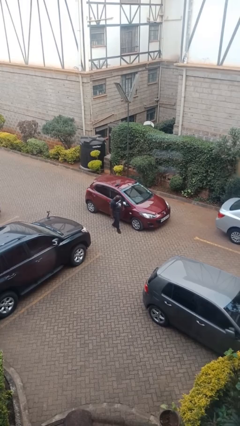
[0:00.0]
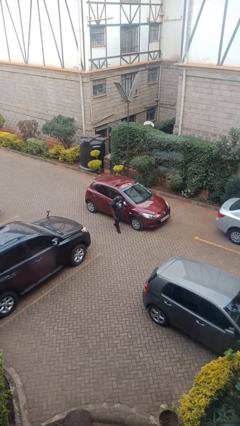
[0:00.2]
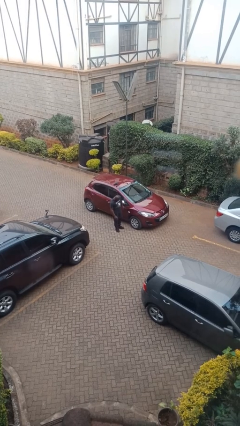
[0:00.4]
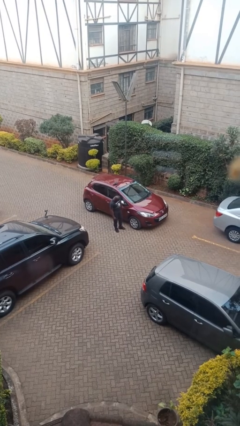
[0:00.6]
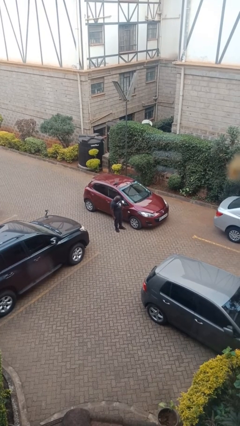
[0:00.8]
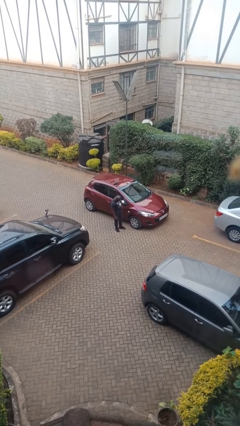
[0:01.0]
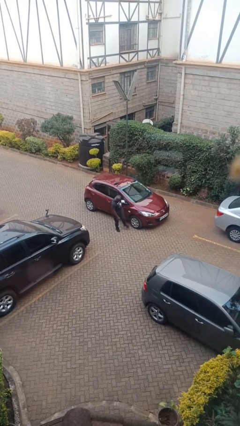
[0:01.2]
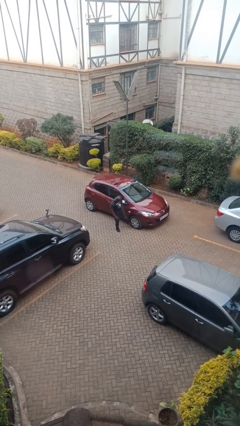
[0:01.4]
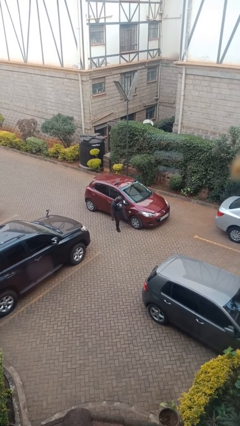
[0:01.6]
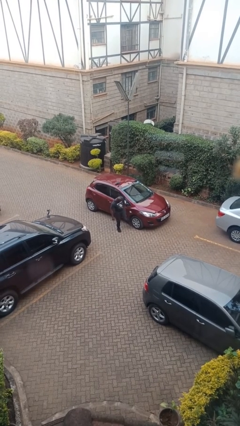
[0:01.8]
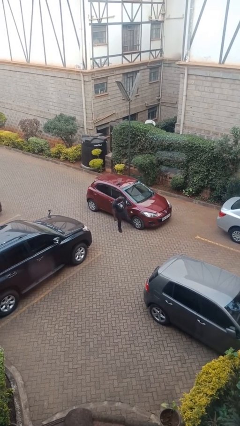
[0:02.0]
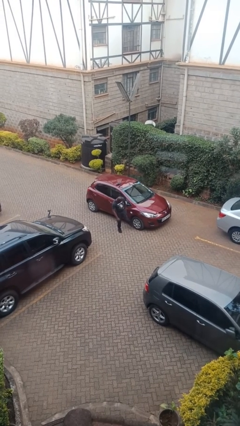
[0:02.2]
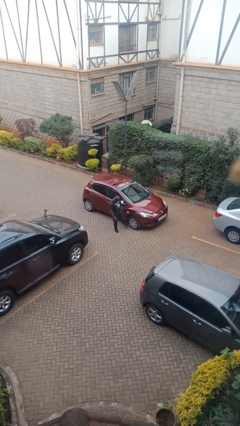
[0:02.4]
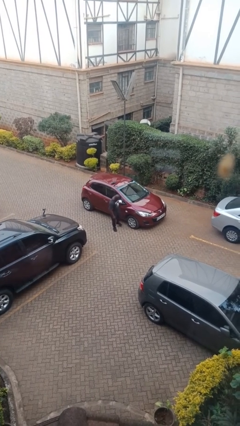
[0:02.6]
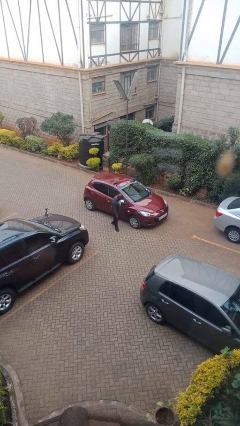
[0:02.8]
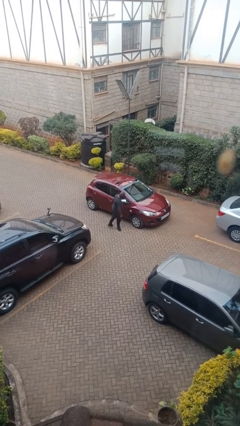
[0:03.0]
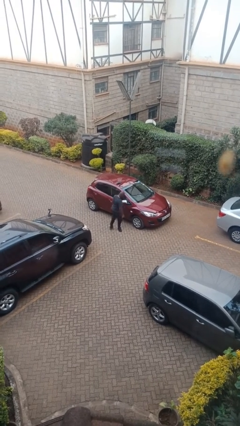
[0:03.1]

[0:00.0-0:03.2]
person kicks car tires

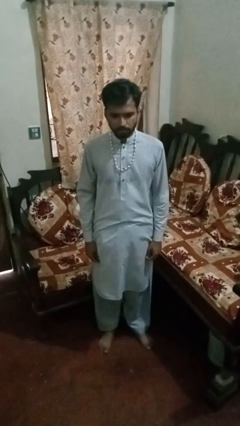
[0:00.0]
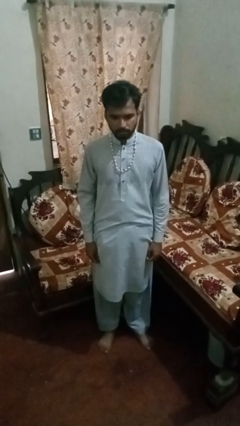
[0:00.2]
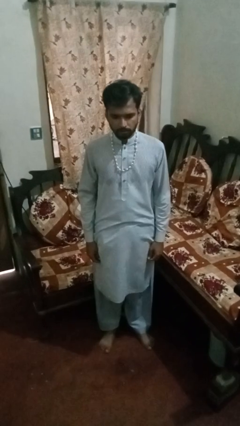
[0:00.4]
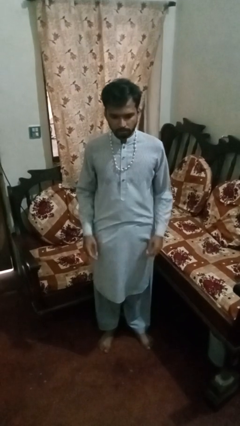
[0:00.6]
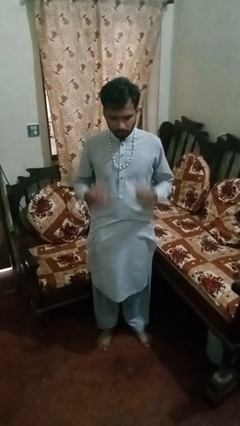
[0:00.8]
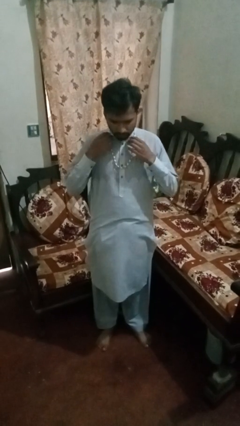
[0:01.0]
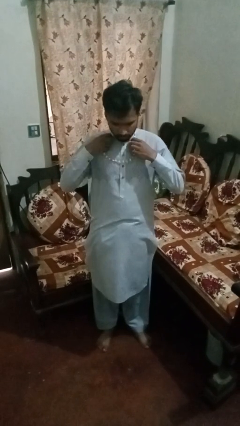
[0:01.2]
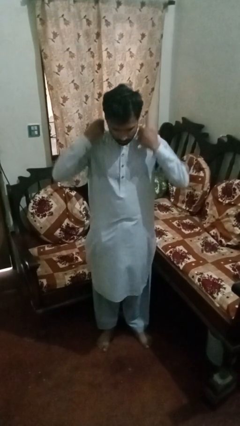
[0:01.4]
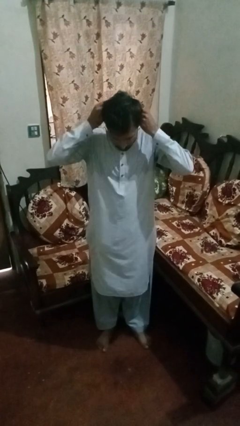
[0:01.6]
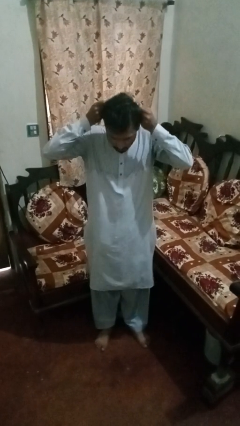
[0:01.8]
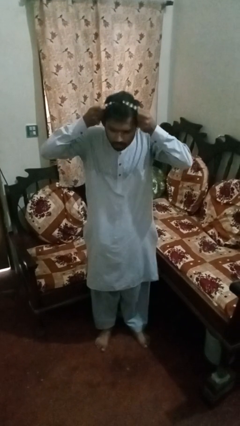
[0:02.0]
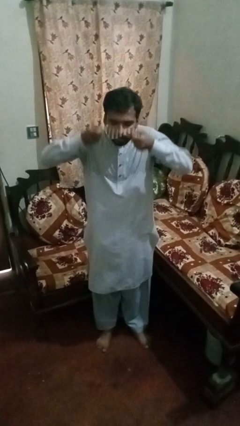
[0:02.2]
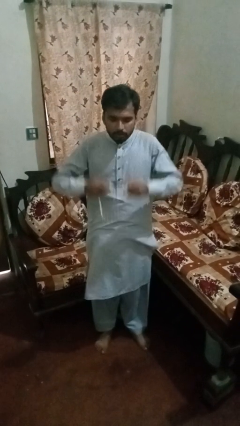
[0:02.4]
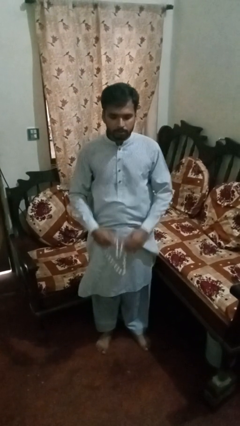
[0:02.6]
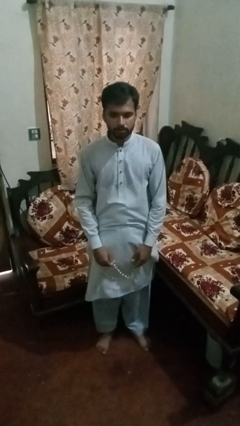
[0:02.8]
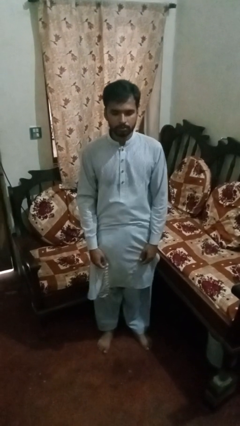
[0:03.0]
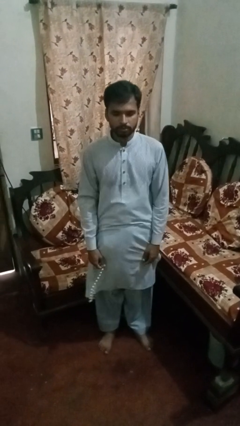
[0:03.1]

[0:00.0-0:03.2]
person takes off necklace

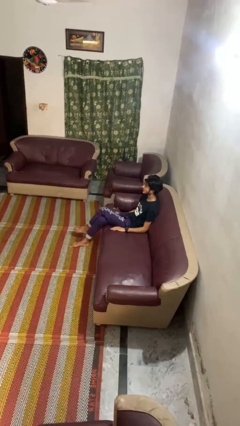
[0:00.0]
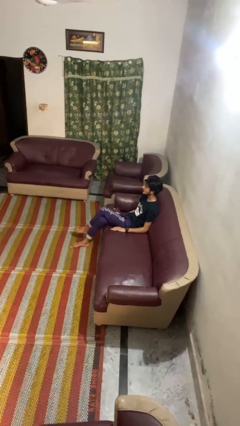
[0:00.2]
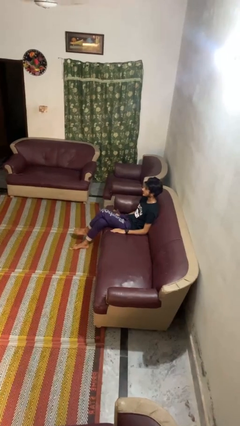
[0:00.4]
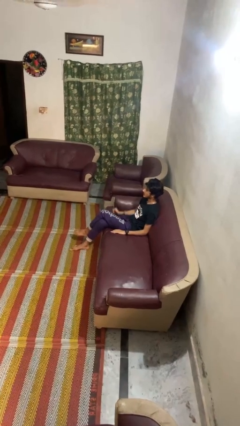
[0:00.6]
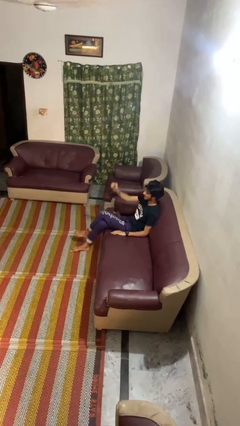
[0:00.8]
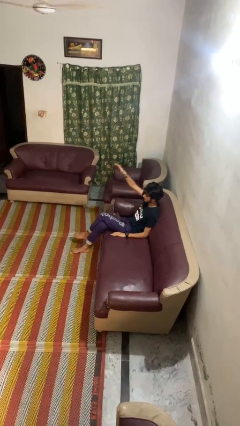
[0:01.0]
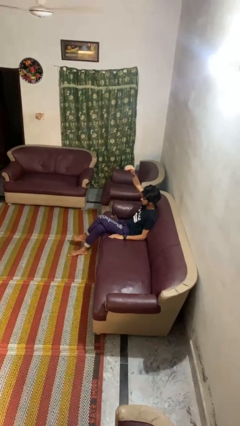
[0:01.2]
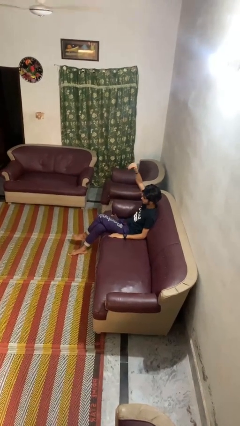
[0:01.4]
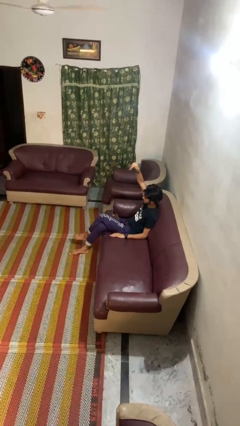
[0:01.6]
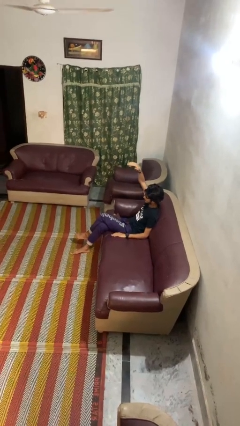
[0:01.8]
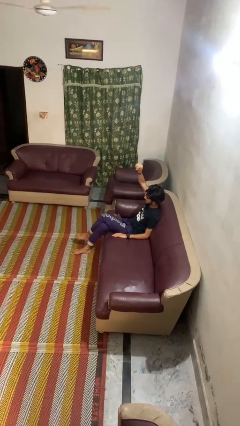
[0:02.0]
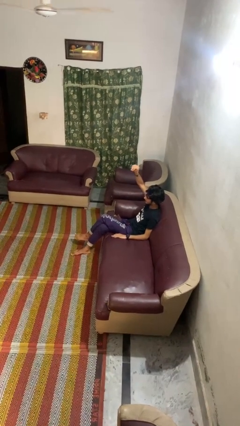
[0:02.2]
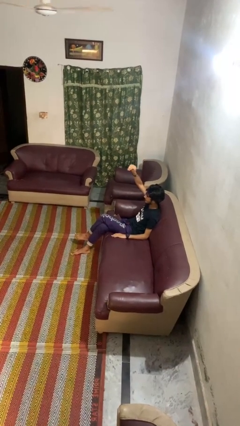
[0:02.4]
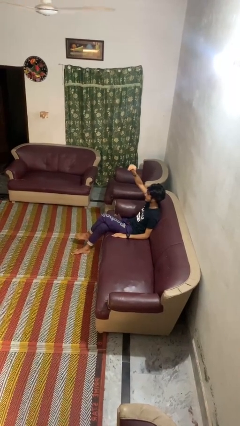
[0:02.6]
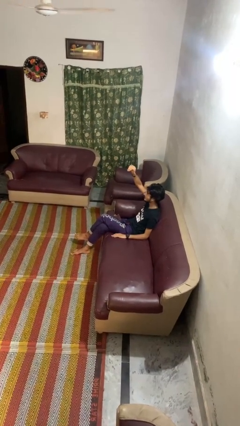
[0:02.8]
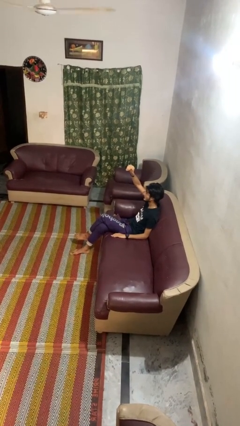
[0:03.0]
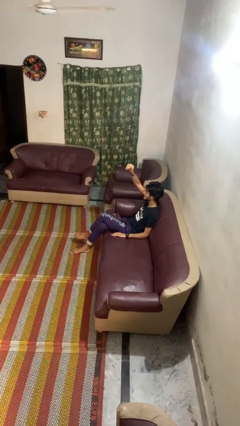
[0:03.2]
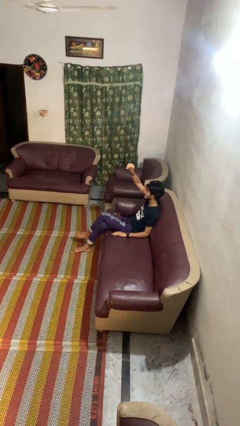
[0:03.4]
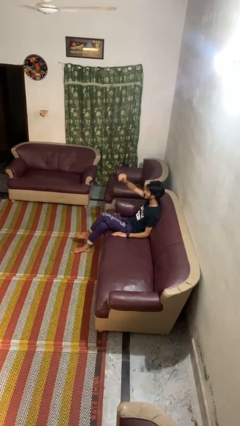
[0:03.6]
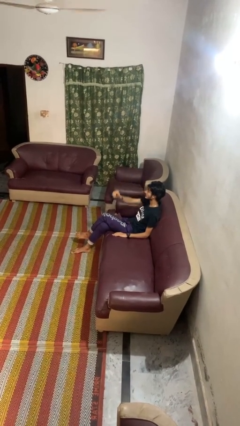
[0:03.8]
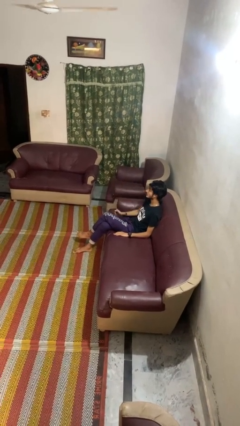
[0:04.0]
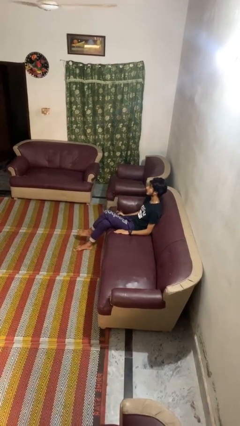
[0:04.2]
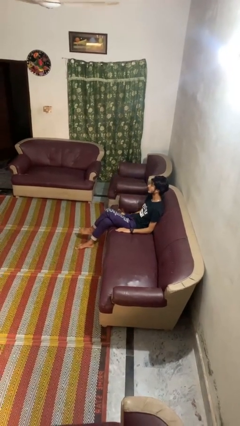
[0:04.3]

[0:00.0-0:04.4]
person gestures come here

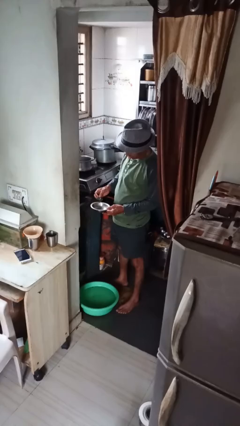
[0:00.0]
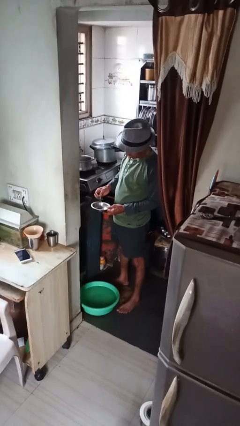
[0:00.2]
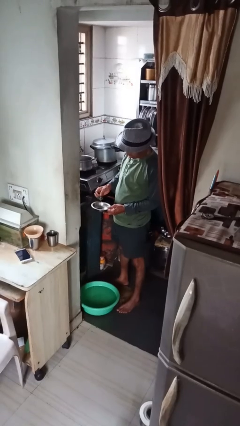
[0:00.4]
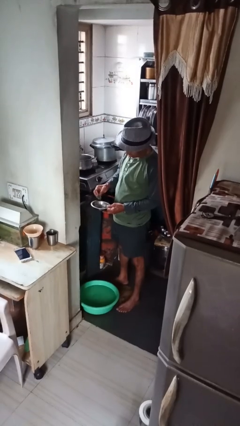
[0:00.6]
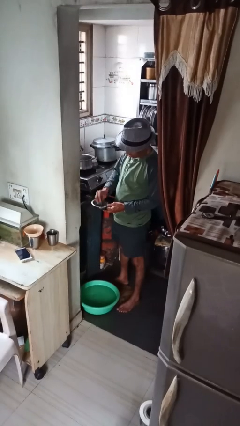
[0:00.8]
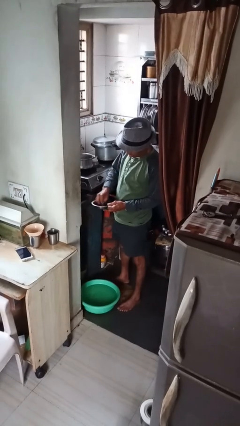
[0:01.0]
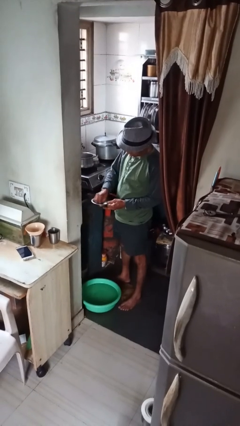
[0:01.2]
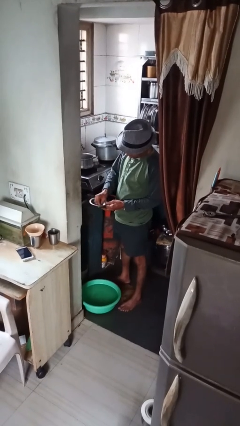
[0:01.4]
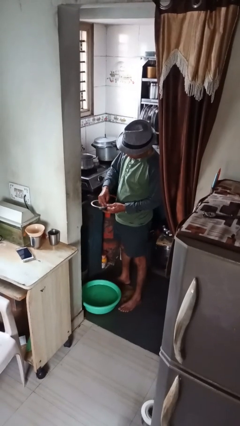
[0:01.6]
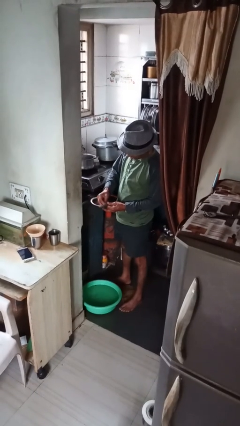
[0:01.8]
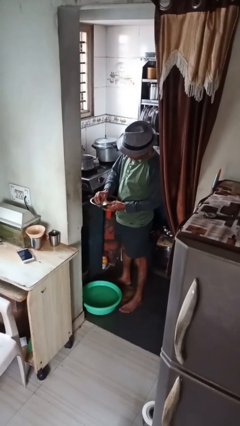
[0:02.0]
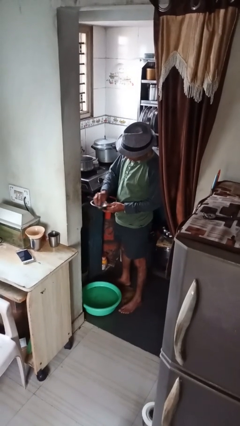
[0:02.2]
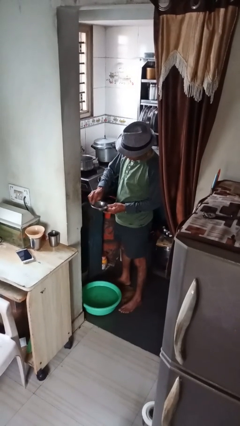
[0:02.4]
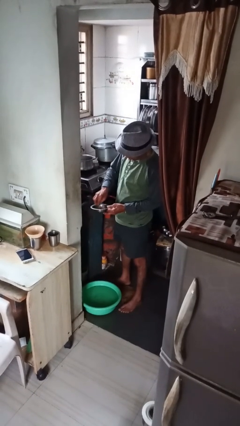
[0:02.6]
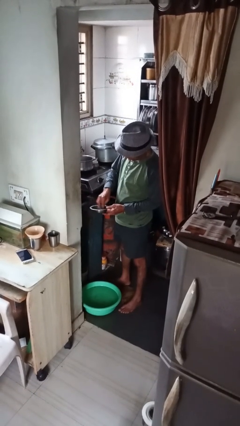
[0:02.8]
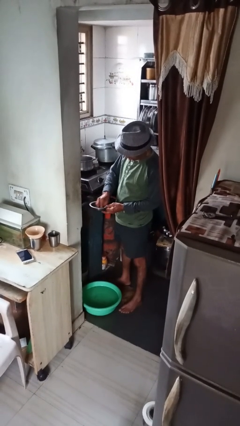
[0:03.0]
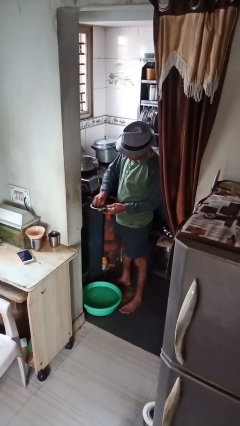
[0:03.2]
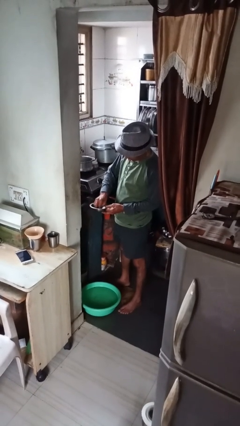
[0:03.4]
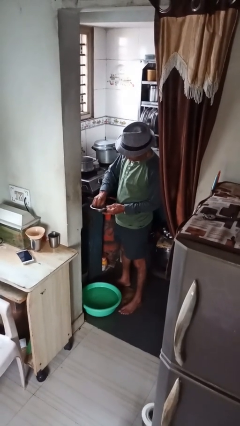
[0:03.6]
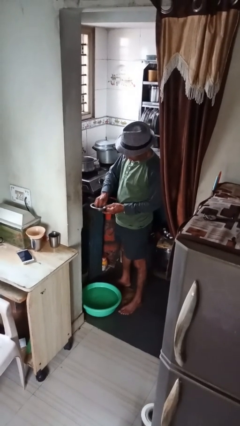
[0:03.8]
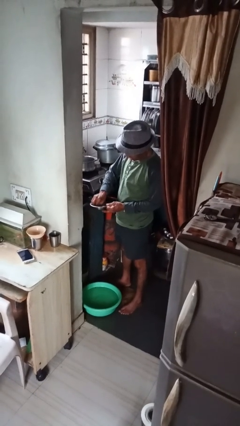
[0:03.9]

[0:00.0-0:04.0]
person washes dish

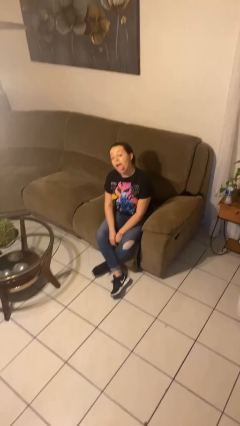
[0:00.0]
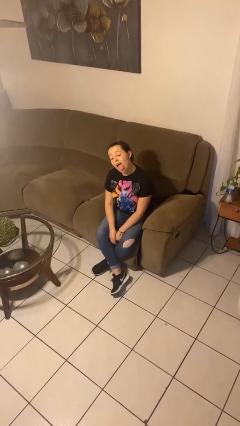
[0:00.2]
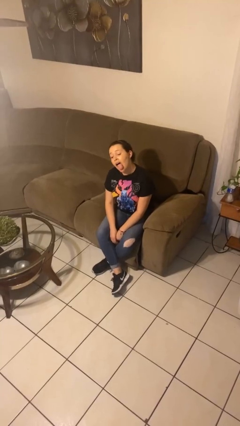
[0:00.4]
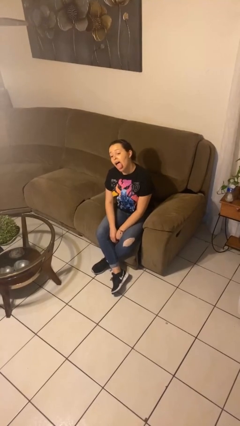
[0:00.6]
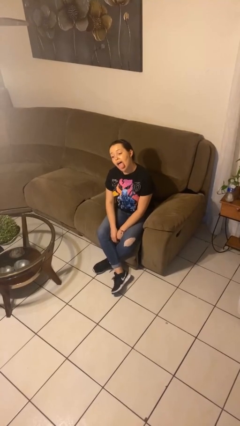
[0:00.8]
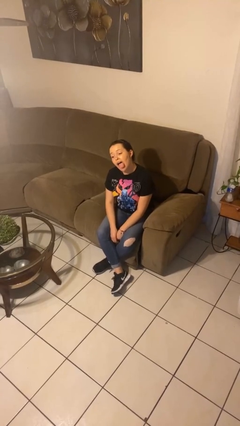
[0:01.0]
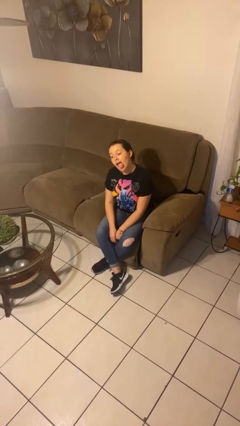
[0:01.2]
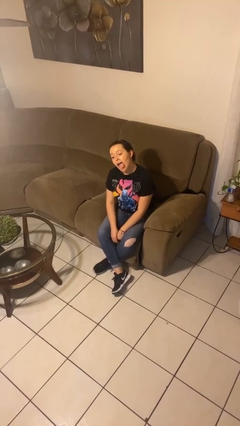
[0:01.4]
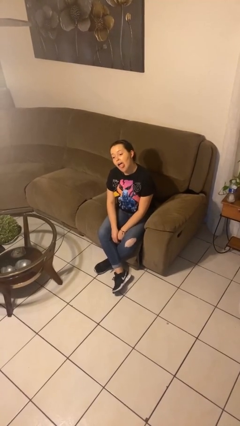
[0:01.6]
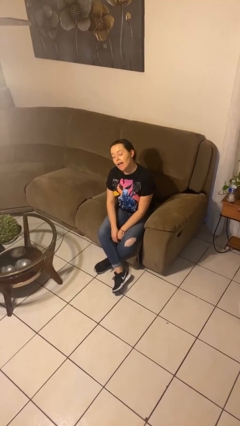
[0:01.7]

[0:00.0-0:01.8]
person sticks out tongue

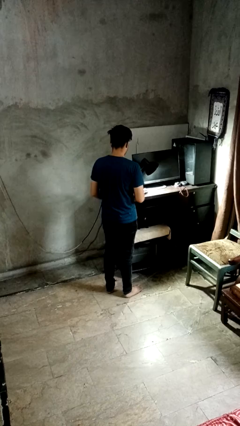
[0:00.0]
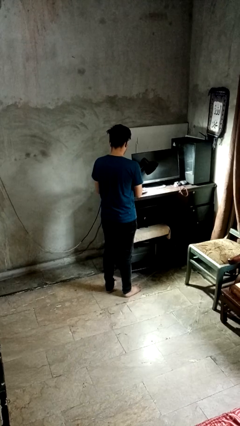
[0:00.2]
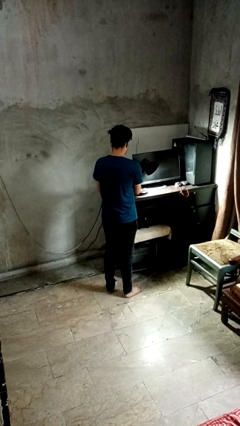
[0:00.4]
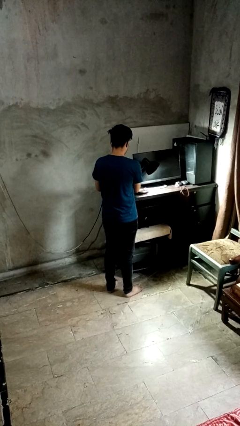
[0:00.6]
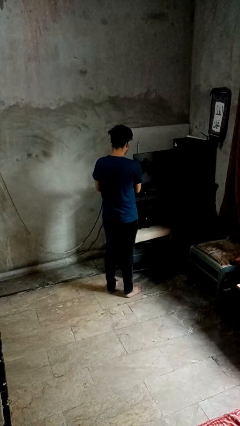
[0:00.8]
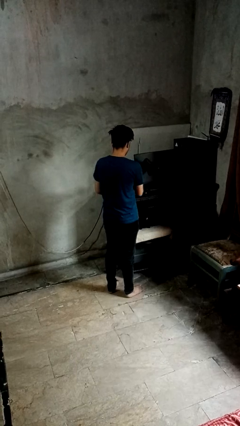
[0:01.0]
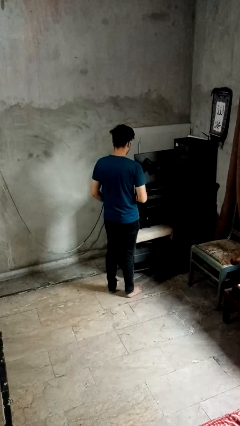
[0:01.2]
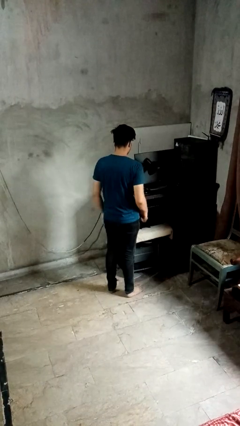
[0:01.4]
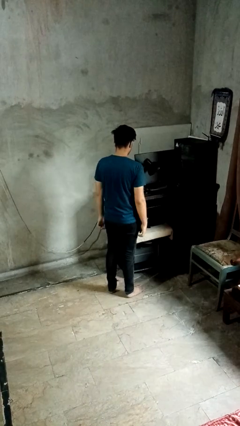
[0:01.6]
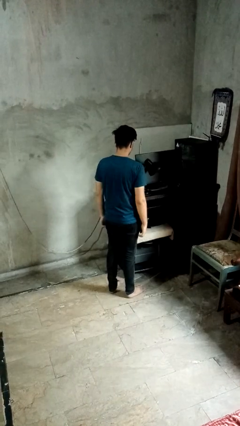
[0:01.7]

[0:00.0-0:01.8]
person turns off lamp
